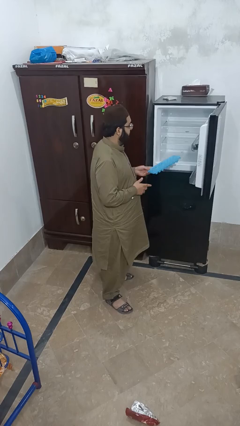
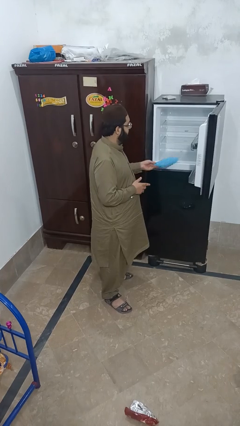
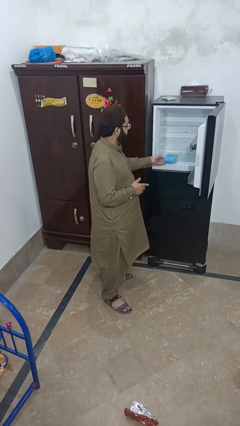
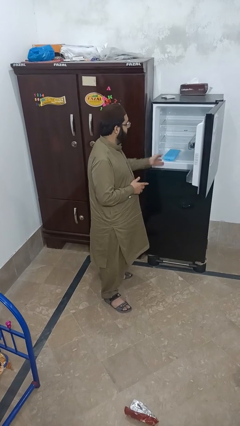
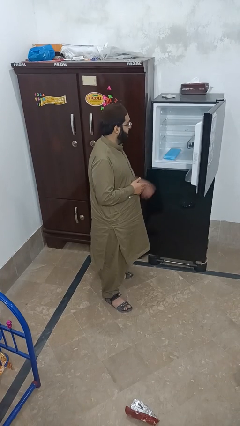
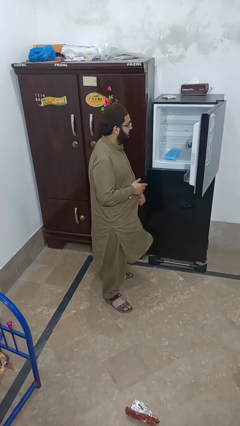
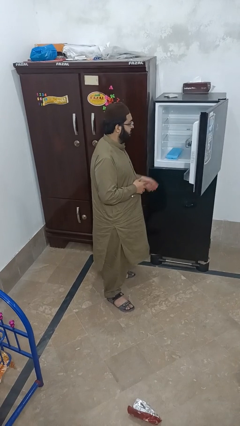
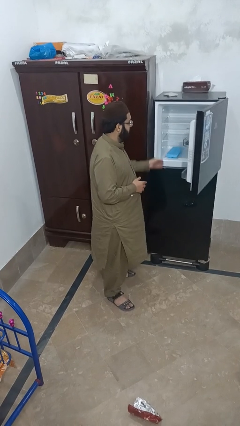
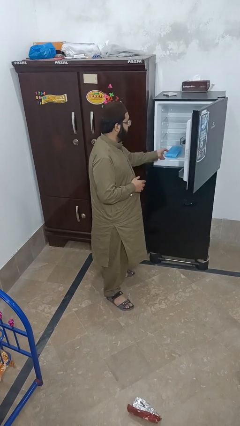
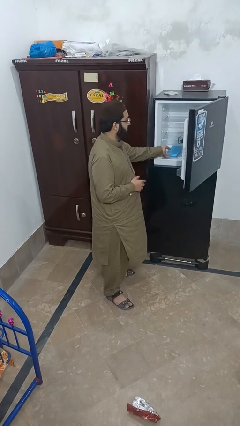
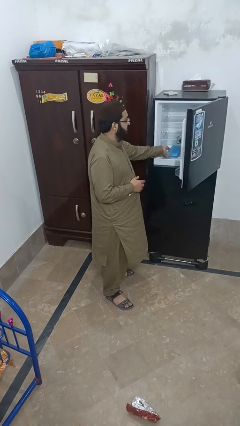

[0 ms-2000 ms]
person puts object into refrigerator

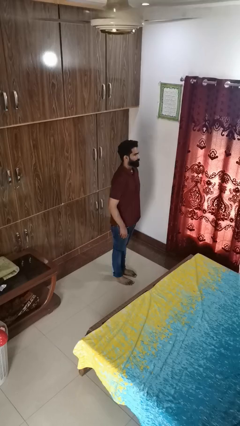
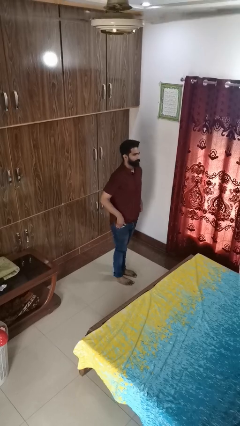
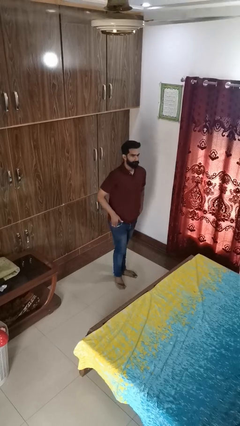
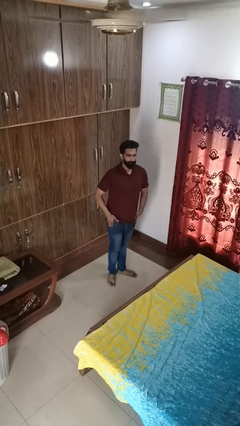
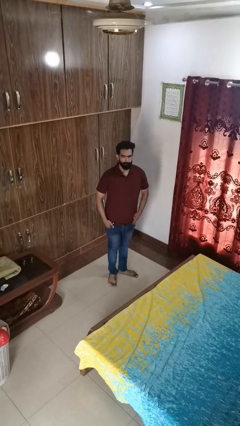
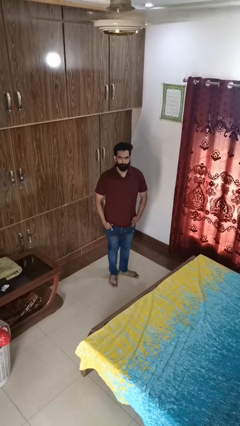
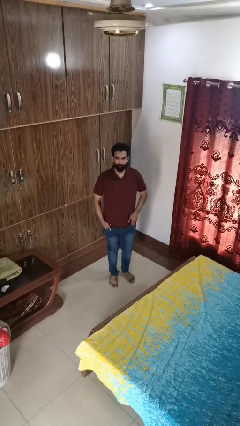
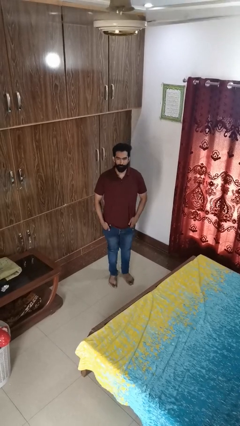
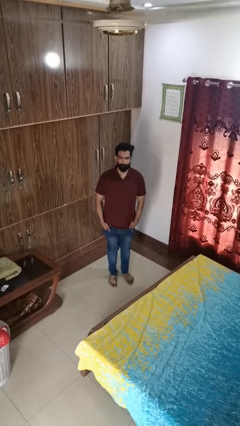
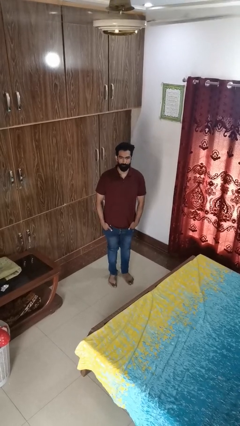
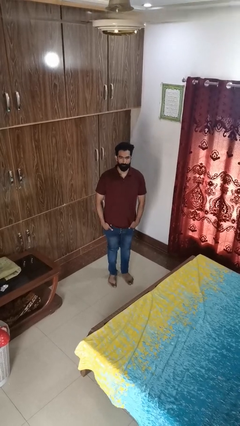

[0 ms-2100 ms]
person puts hands in back pockets

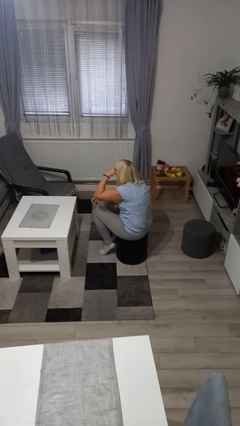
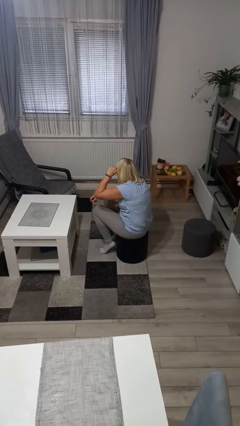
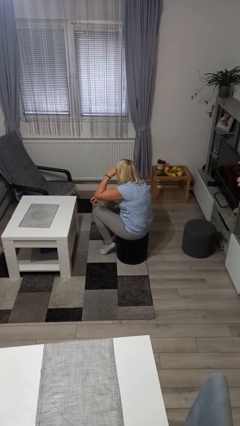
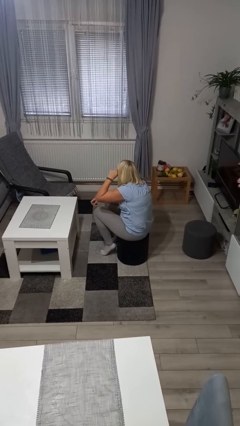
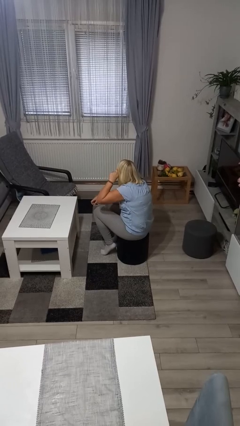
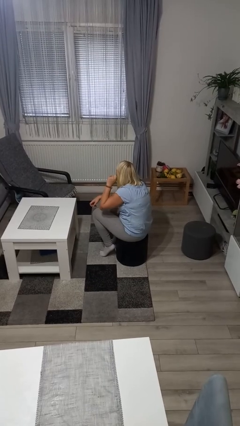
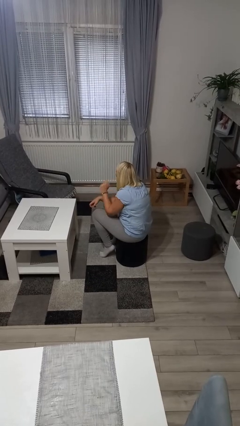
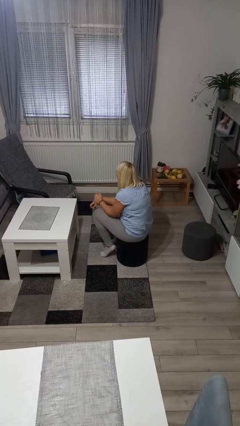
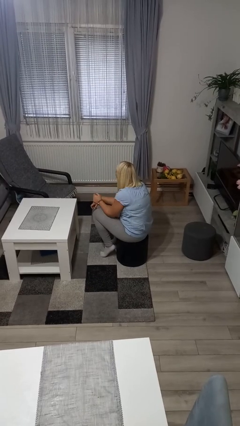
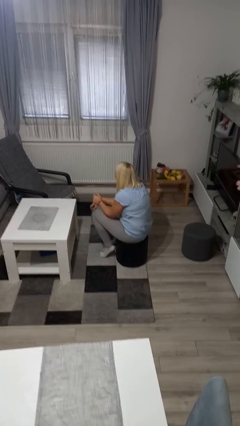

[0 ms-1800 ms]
person rubs eyes

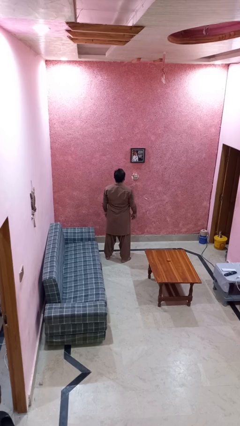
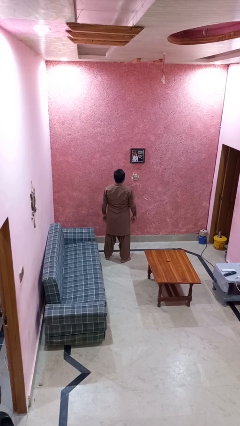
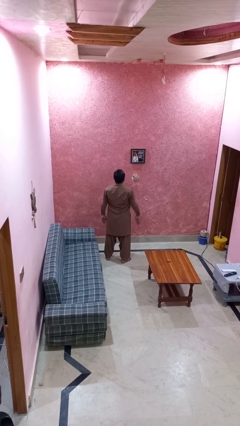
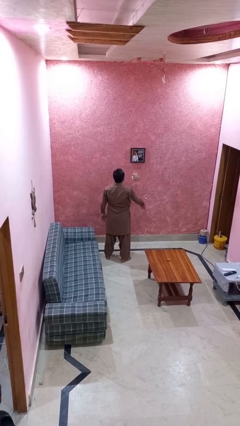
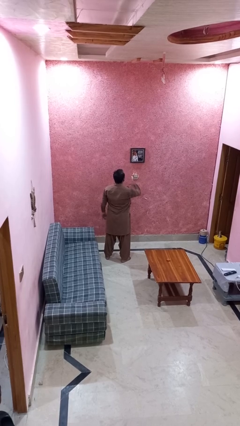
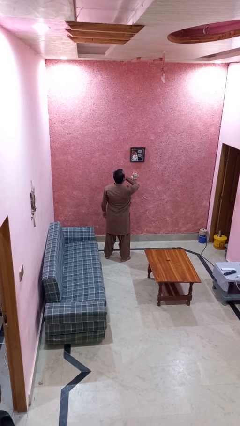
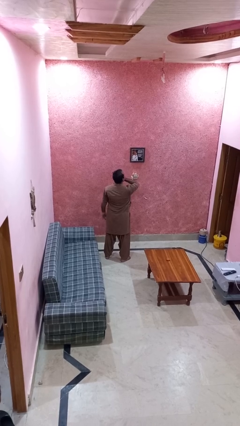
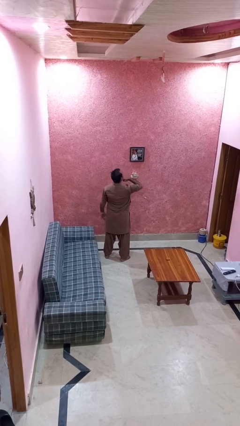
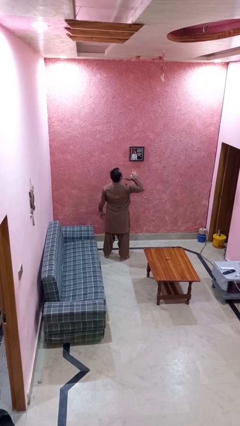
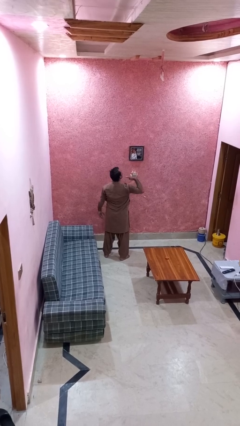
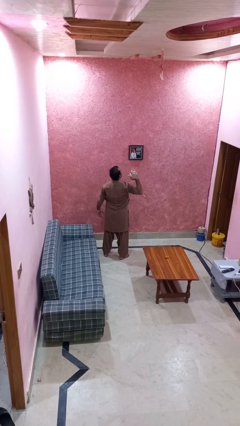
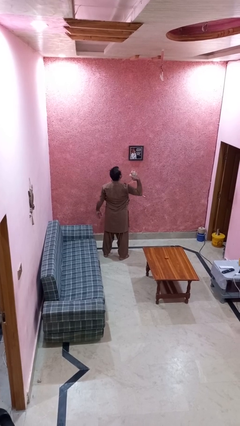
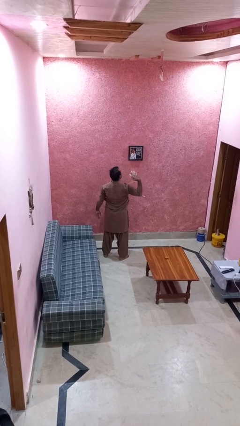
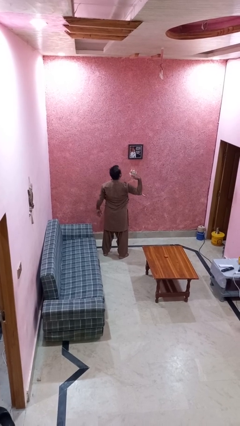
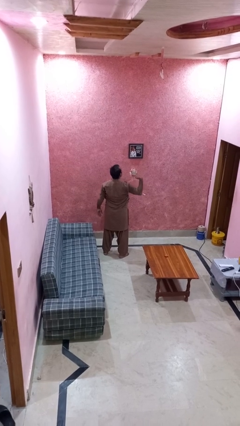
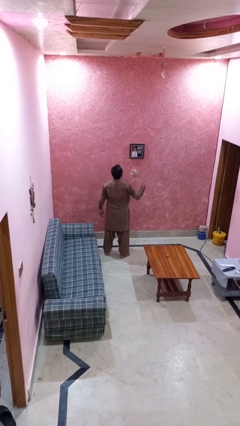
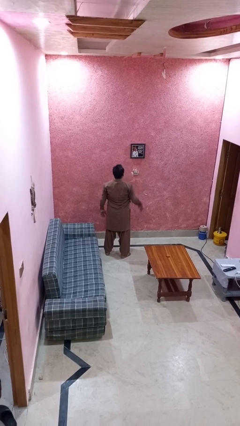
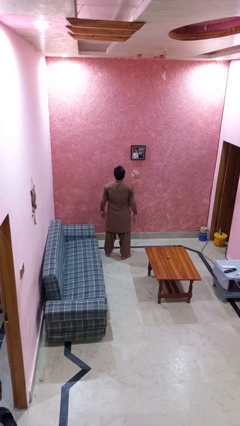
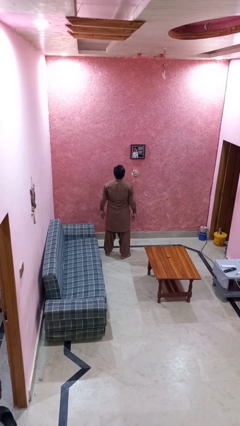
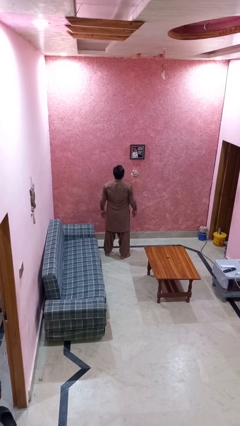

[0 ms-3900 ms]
person gestures cut

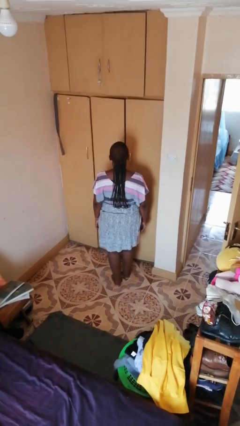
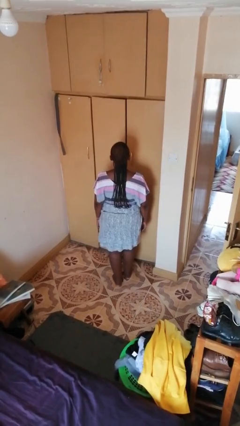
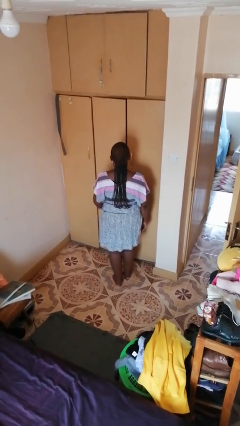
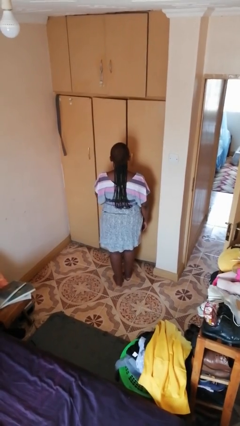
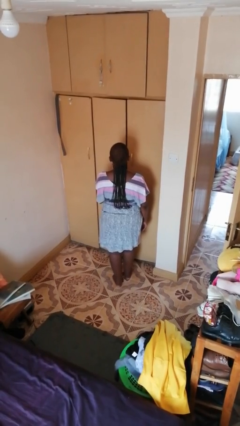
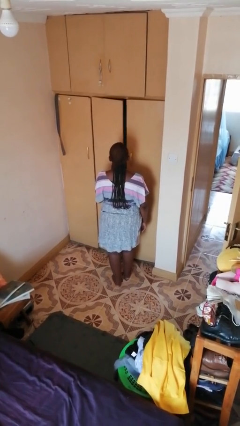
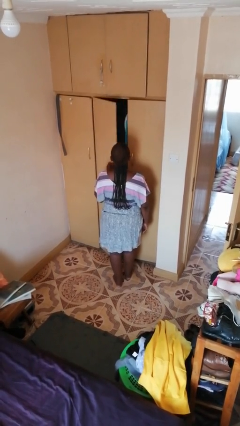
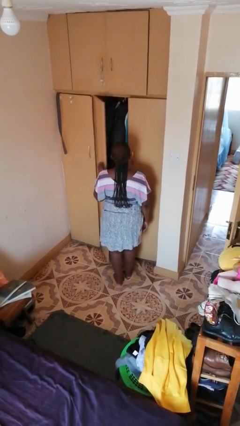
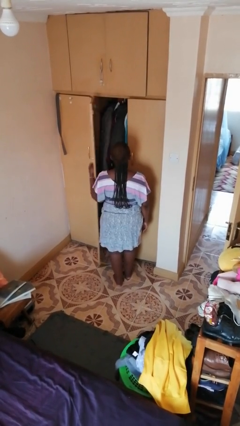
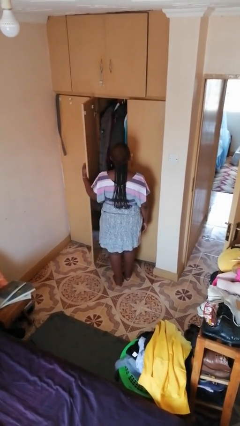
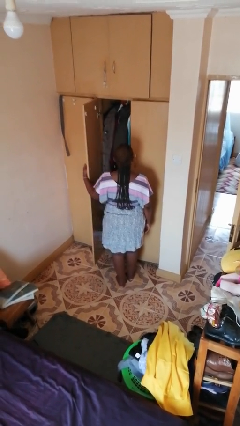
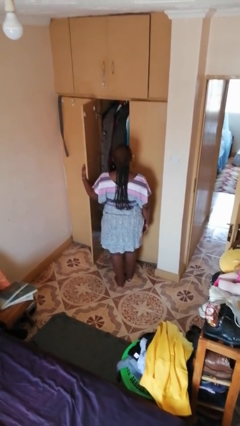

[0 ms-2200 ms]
person opens closet door

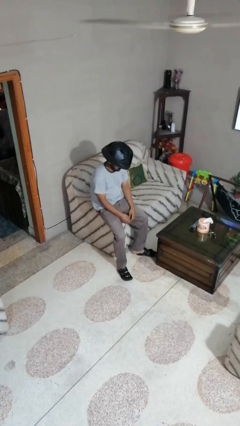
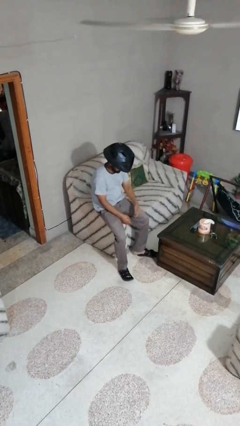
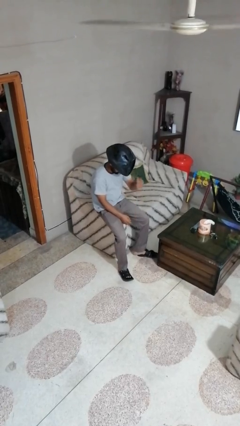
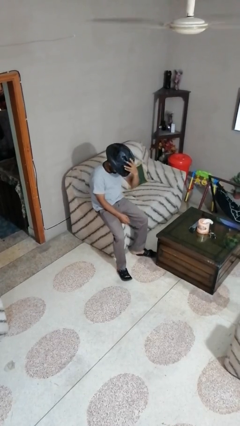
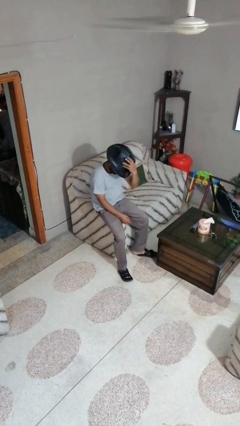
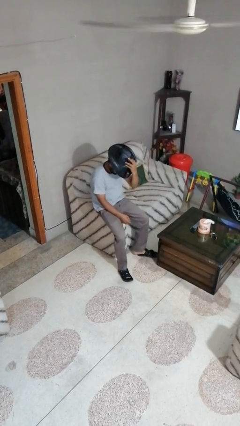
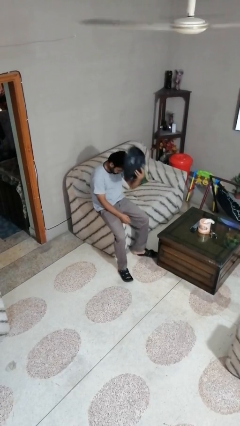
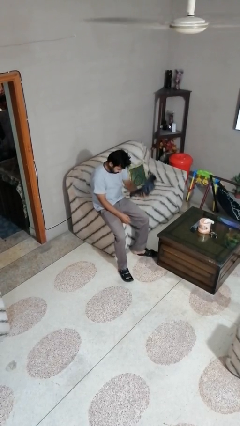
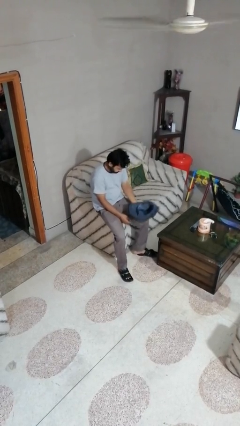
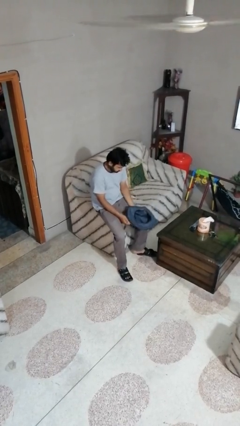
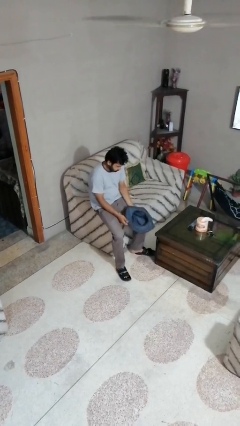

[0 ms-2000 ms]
person takes off hat

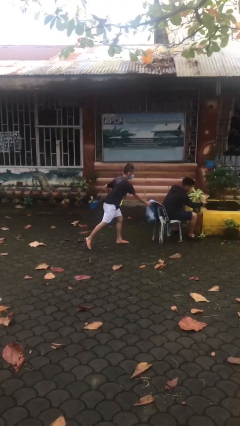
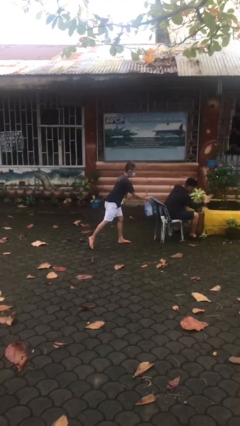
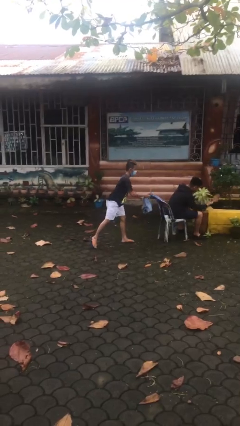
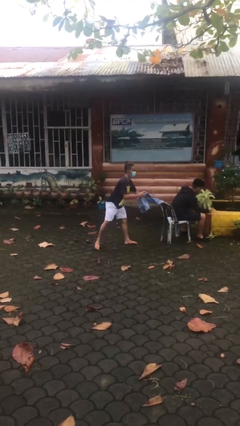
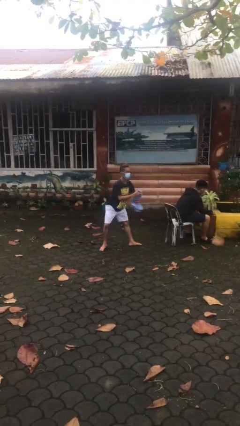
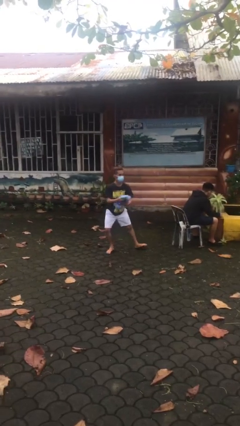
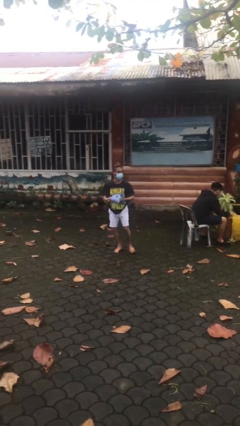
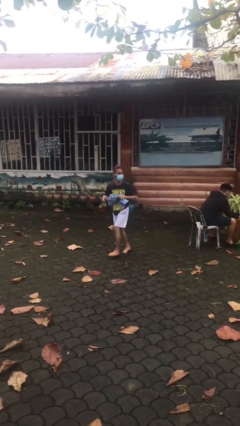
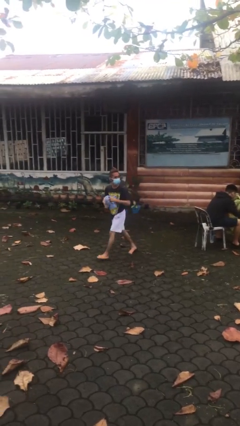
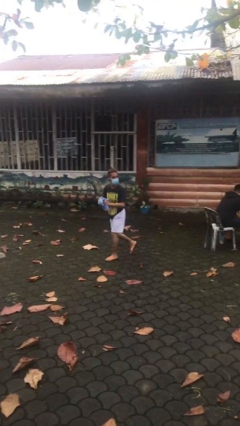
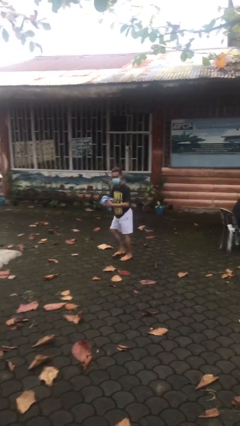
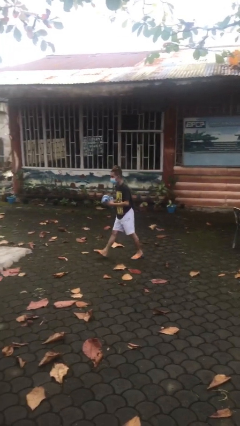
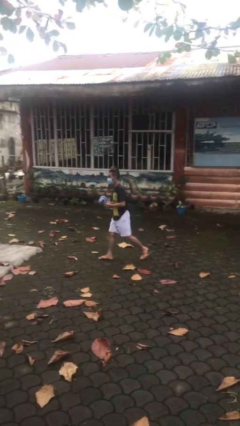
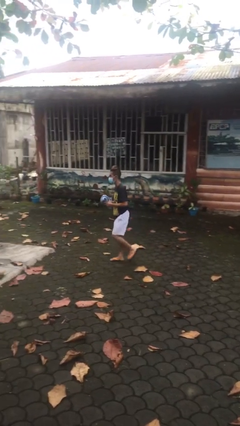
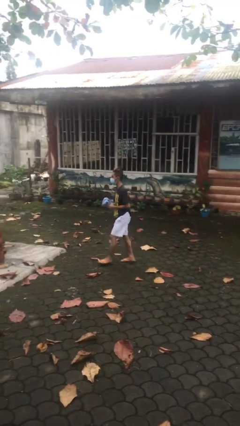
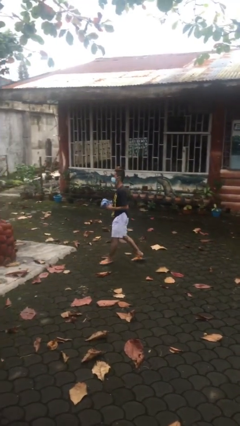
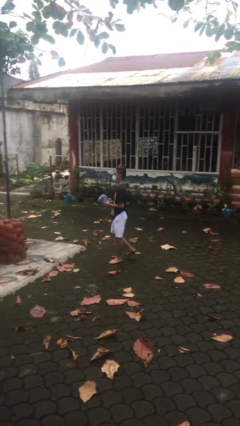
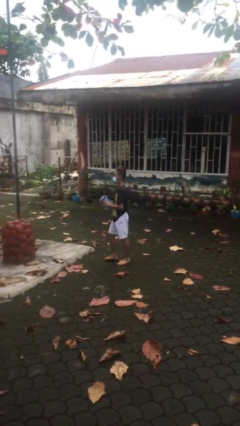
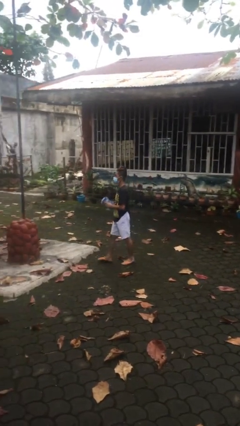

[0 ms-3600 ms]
person steals object from person
